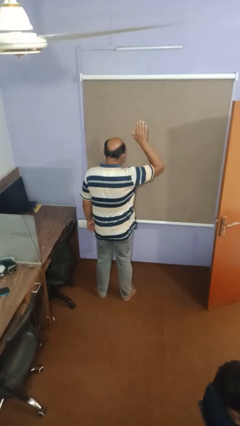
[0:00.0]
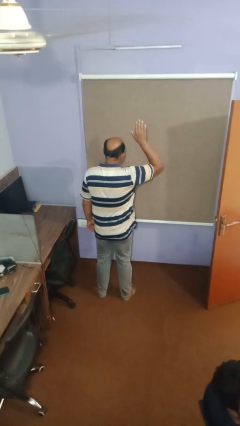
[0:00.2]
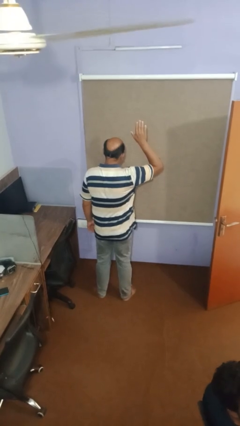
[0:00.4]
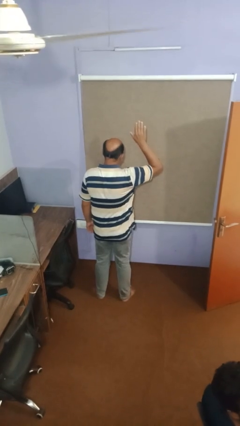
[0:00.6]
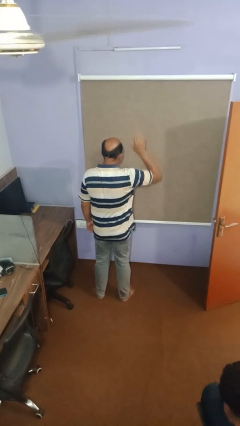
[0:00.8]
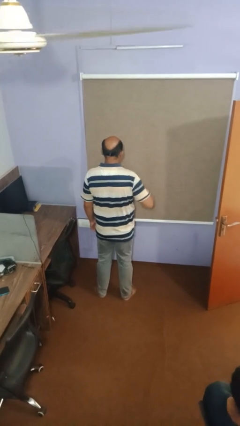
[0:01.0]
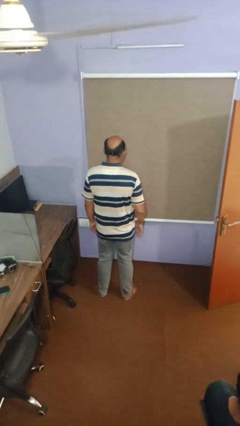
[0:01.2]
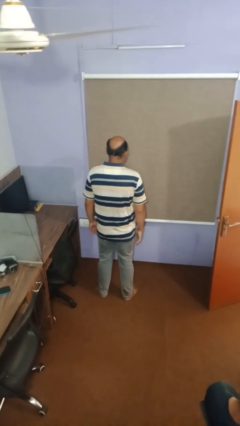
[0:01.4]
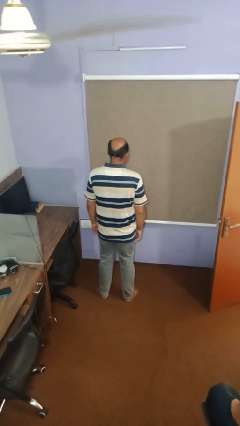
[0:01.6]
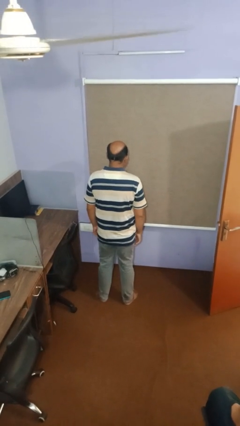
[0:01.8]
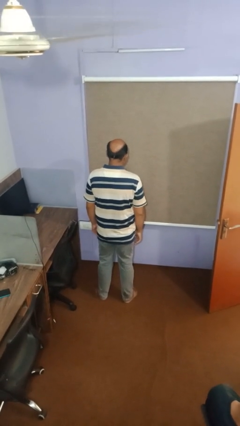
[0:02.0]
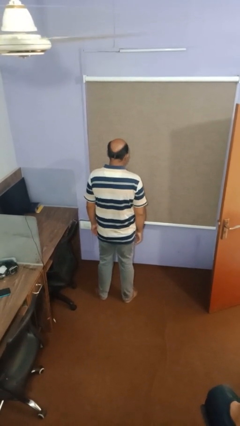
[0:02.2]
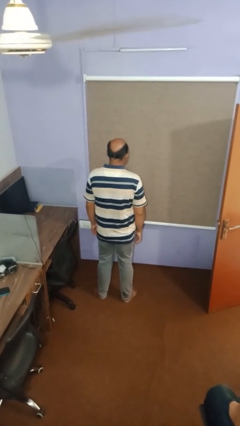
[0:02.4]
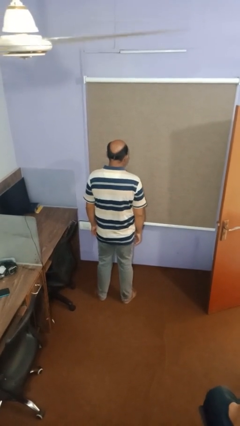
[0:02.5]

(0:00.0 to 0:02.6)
person gestures lower hand

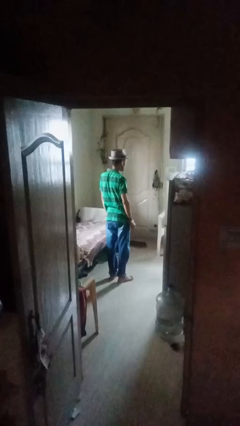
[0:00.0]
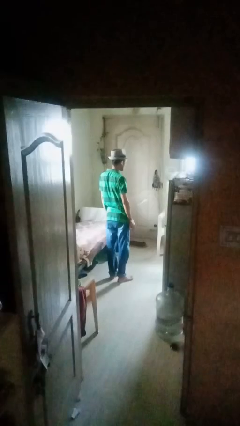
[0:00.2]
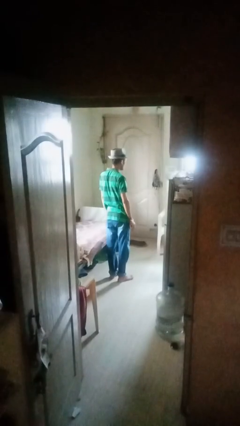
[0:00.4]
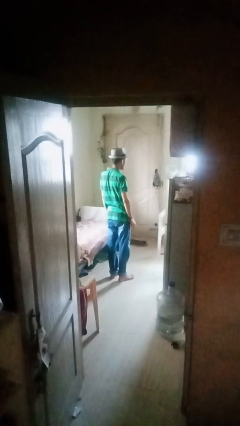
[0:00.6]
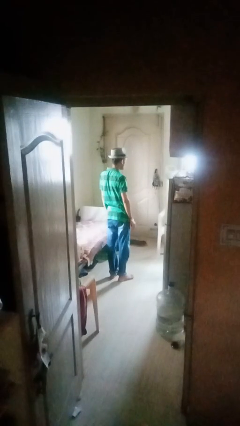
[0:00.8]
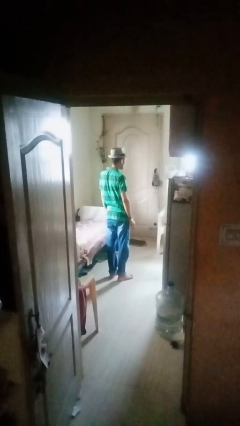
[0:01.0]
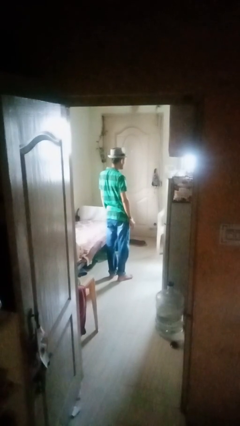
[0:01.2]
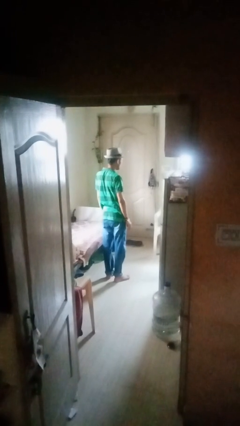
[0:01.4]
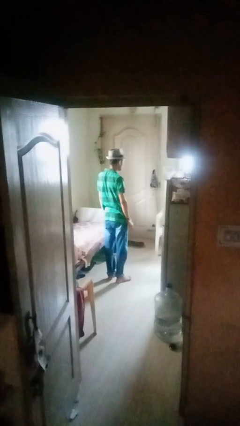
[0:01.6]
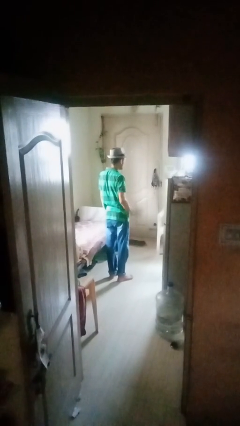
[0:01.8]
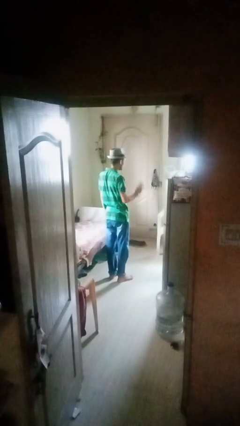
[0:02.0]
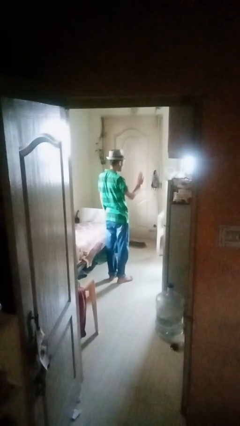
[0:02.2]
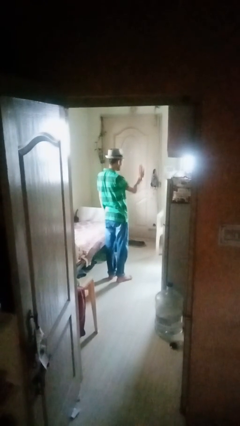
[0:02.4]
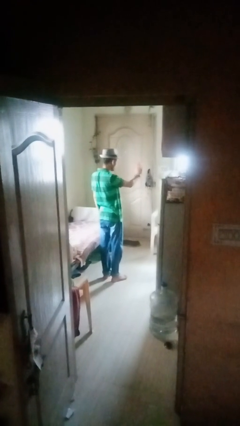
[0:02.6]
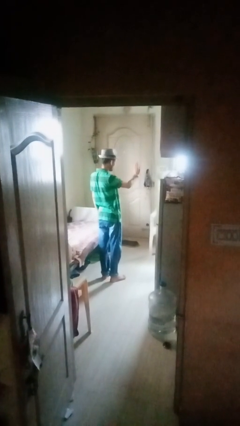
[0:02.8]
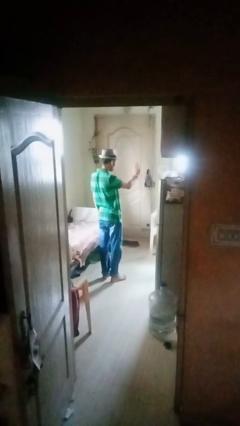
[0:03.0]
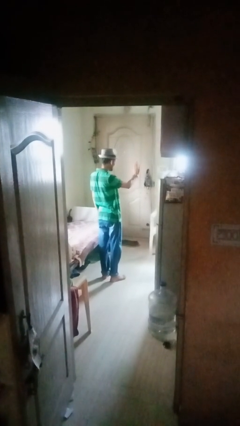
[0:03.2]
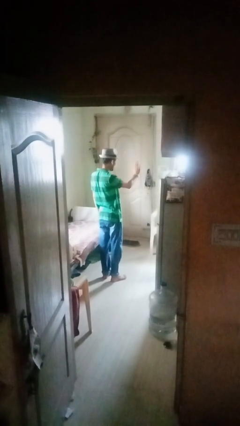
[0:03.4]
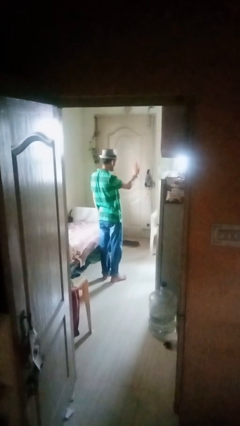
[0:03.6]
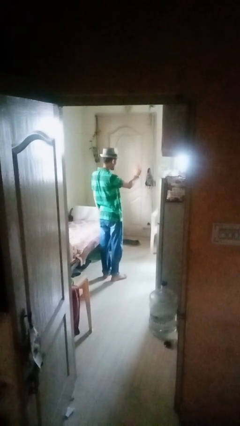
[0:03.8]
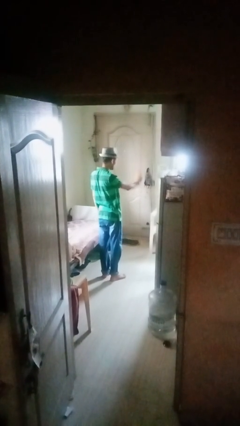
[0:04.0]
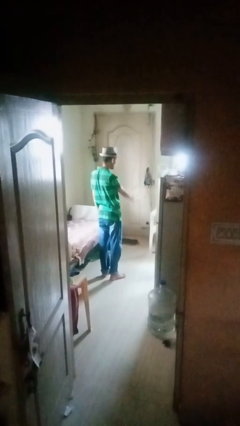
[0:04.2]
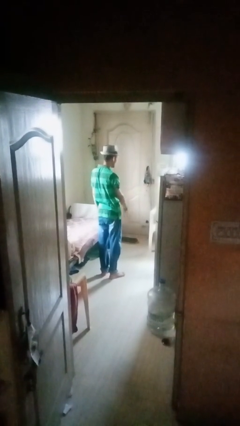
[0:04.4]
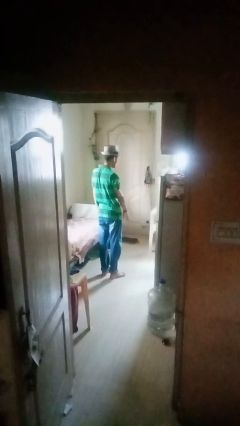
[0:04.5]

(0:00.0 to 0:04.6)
person gestures stop

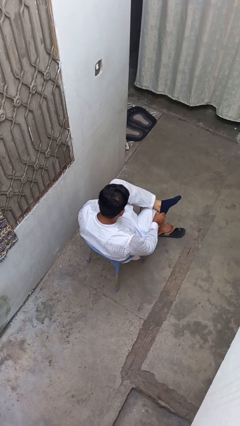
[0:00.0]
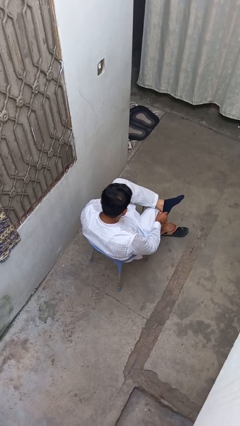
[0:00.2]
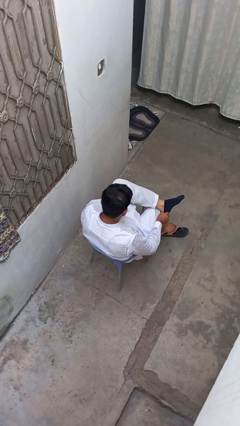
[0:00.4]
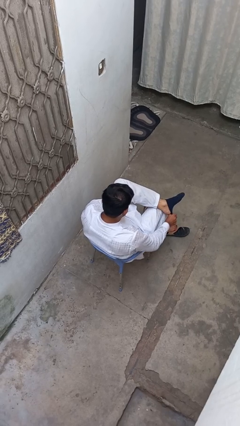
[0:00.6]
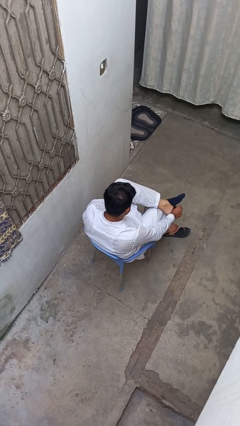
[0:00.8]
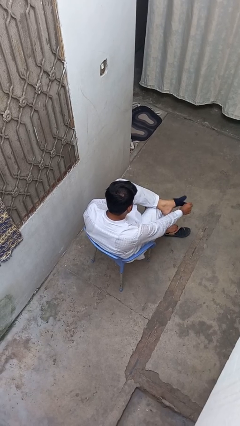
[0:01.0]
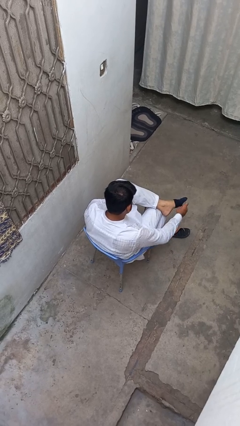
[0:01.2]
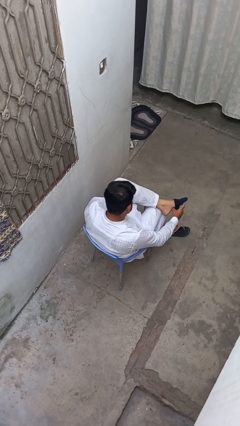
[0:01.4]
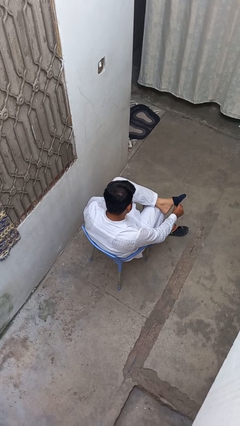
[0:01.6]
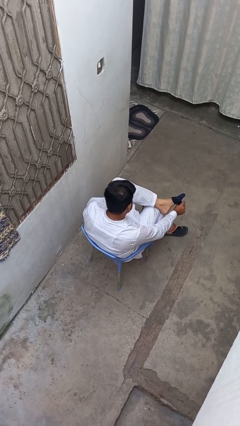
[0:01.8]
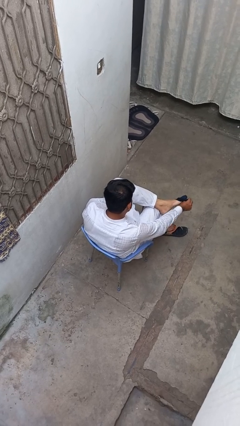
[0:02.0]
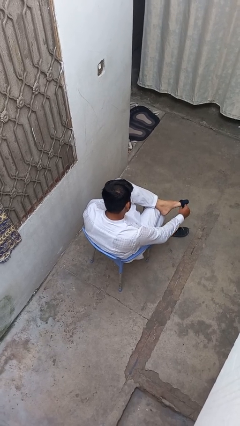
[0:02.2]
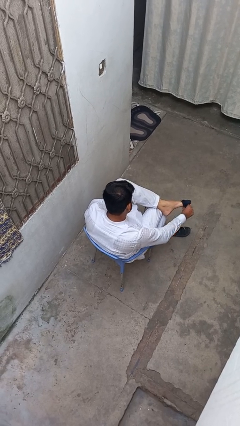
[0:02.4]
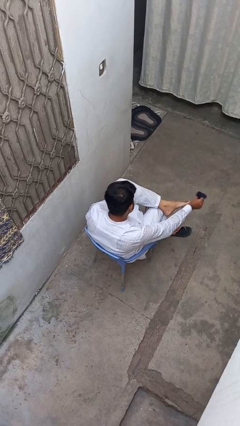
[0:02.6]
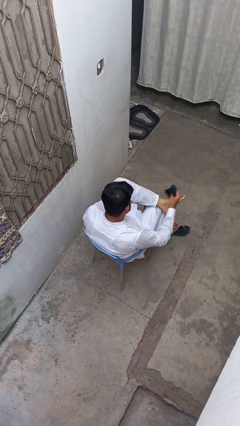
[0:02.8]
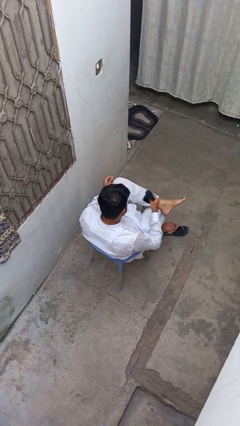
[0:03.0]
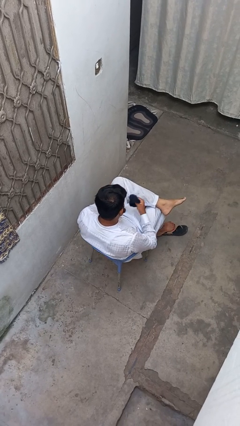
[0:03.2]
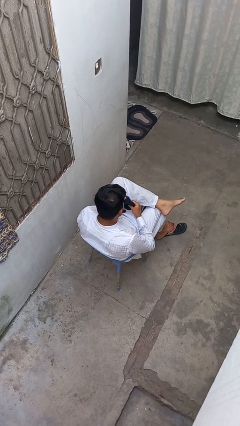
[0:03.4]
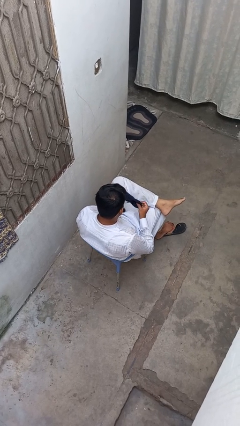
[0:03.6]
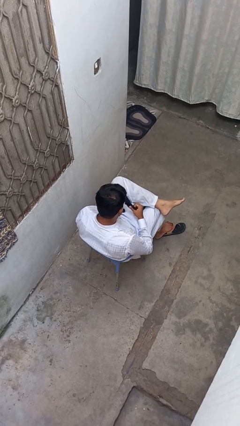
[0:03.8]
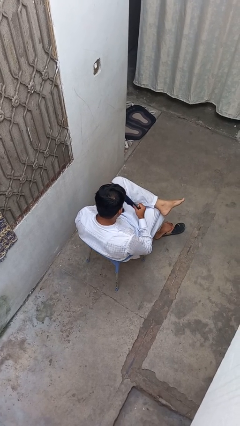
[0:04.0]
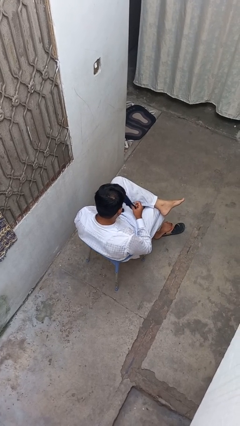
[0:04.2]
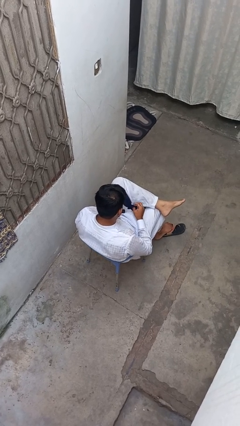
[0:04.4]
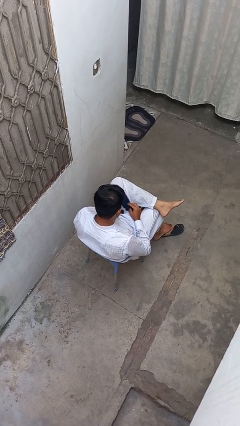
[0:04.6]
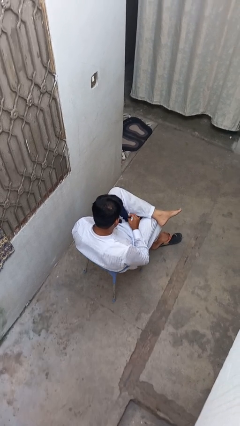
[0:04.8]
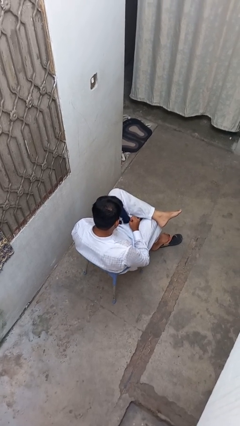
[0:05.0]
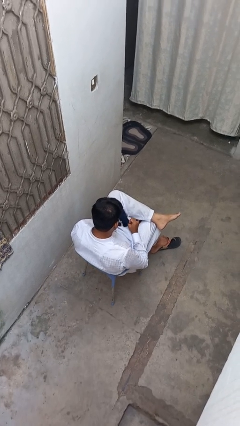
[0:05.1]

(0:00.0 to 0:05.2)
person takes off socks

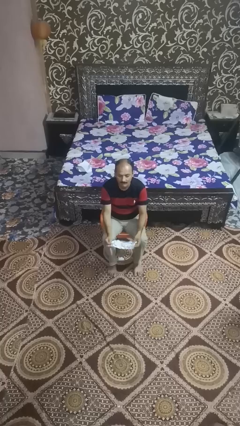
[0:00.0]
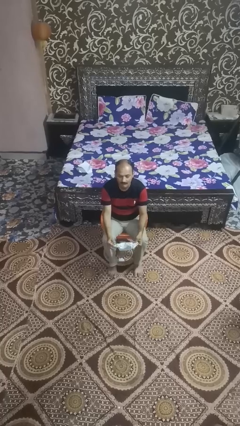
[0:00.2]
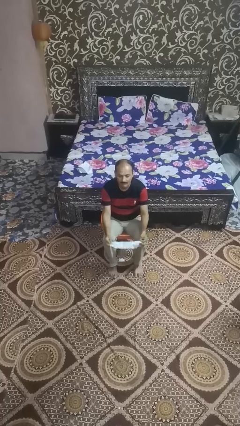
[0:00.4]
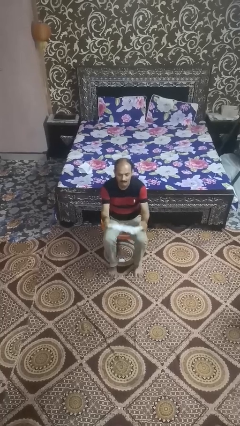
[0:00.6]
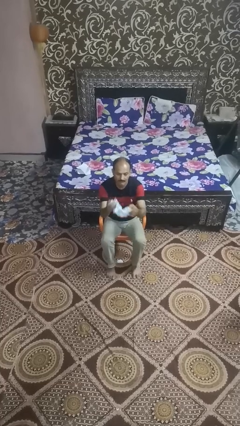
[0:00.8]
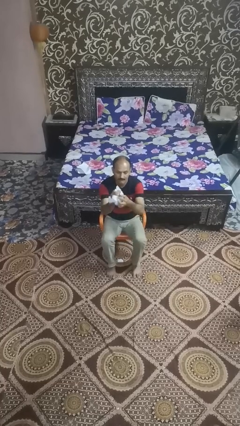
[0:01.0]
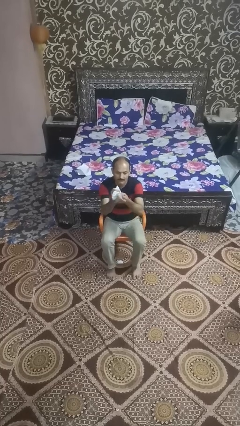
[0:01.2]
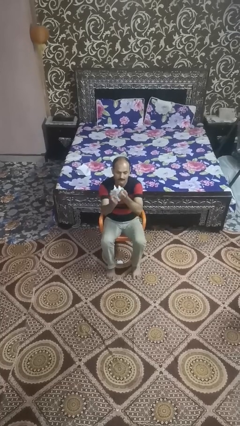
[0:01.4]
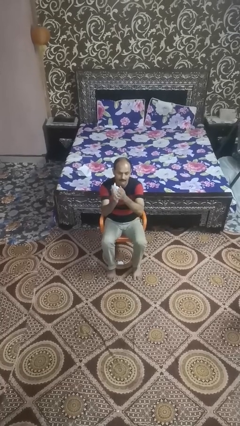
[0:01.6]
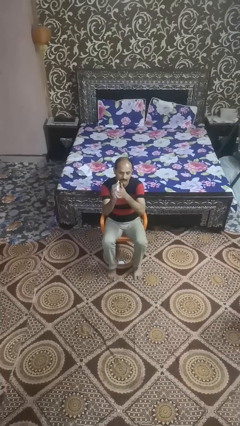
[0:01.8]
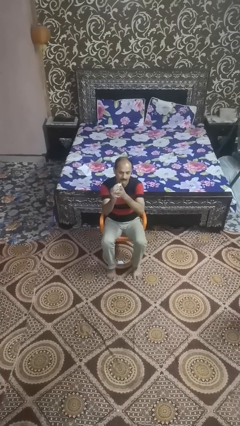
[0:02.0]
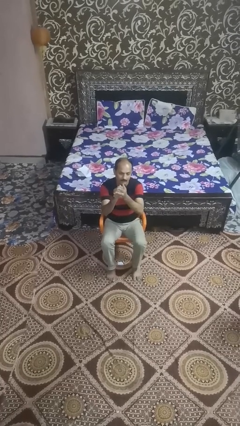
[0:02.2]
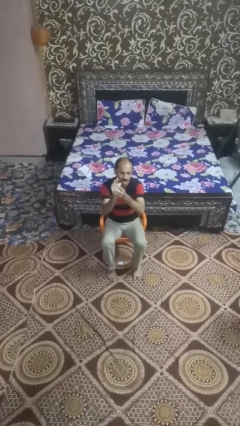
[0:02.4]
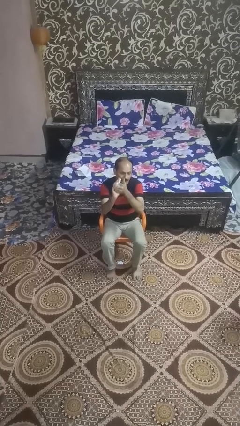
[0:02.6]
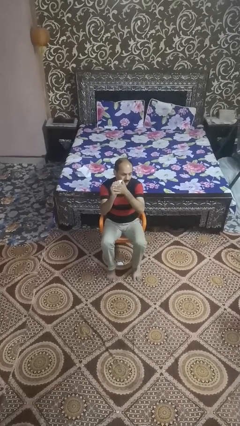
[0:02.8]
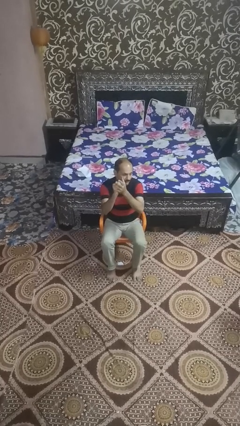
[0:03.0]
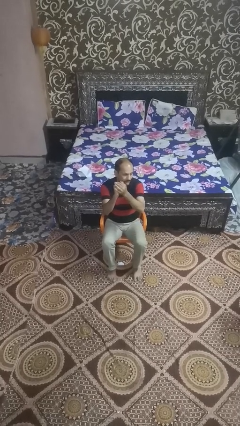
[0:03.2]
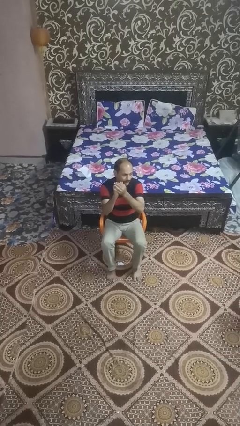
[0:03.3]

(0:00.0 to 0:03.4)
person crumples paper

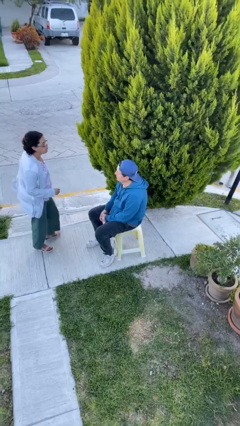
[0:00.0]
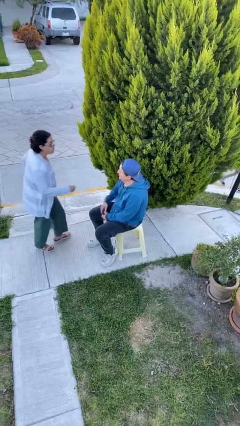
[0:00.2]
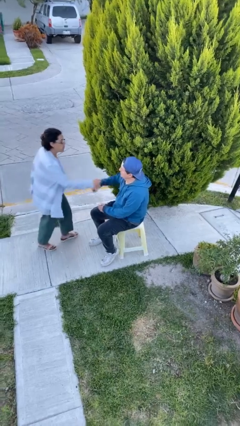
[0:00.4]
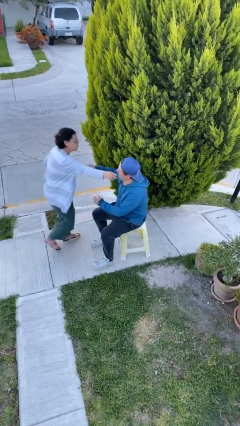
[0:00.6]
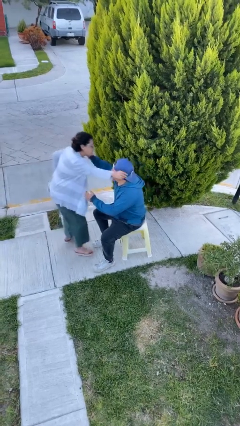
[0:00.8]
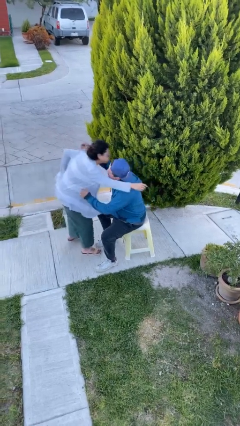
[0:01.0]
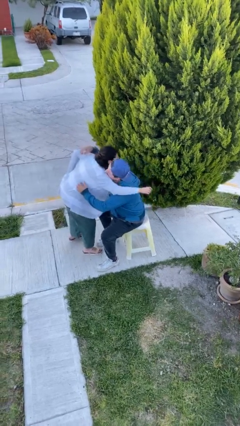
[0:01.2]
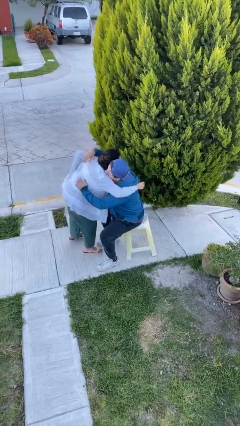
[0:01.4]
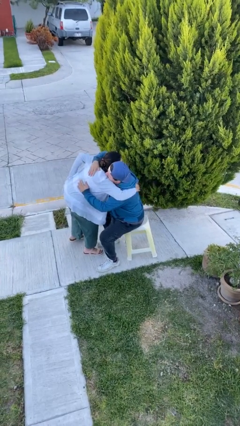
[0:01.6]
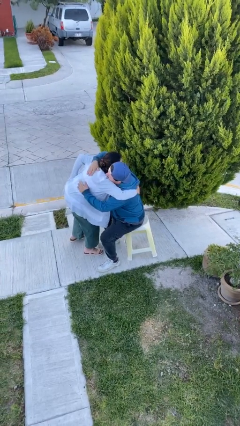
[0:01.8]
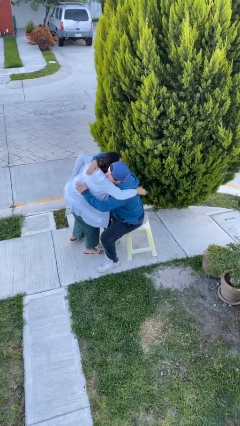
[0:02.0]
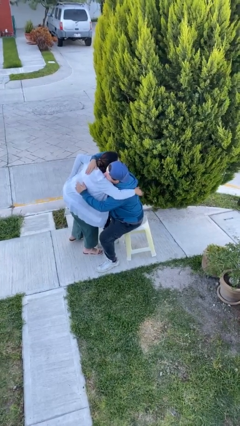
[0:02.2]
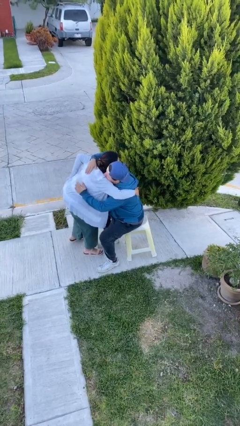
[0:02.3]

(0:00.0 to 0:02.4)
person embraces person
